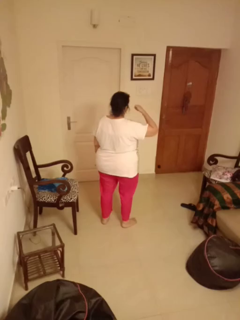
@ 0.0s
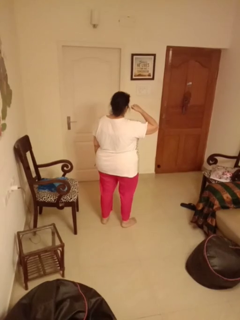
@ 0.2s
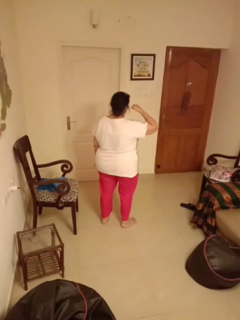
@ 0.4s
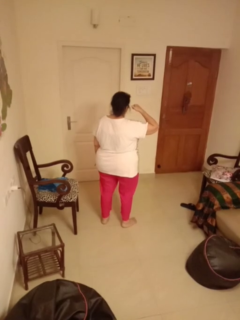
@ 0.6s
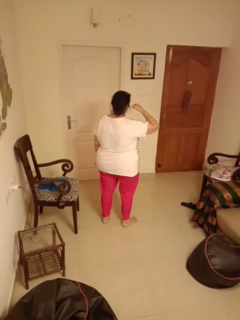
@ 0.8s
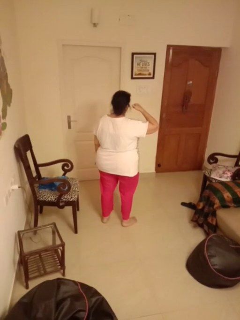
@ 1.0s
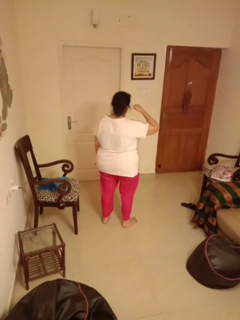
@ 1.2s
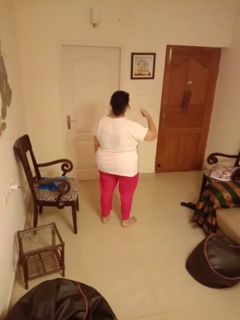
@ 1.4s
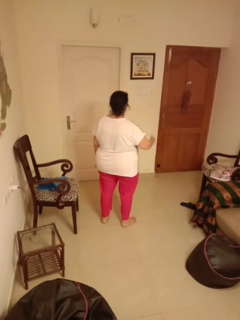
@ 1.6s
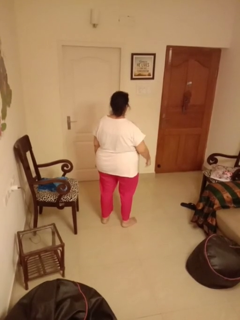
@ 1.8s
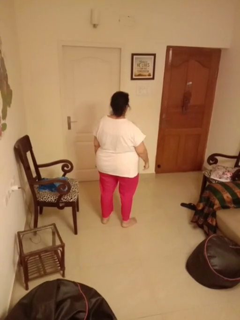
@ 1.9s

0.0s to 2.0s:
person gestures call me

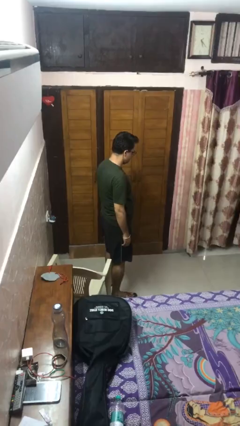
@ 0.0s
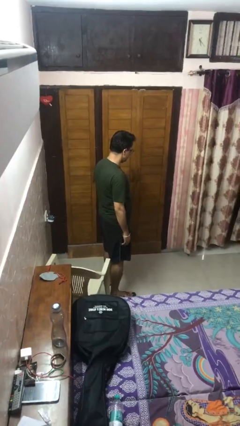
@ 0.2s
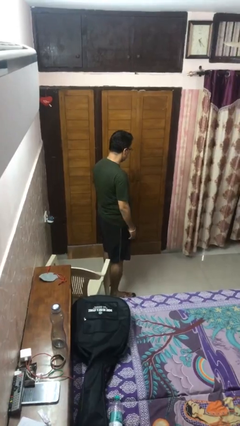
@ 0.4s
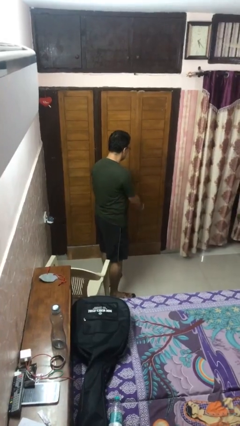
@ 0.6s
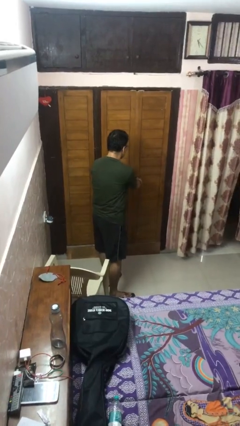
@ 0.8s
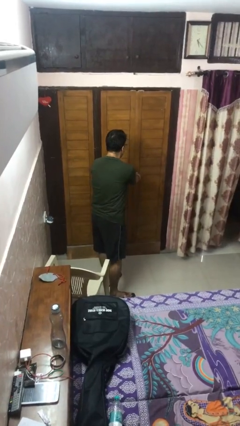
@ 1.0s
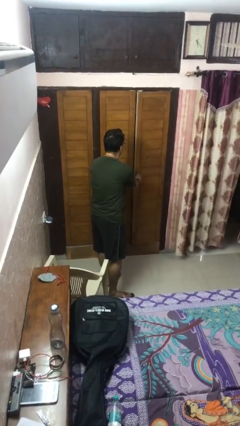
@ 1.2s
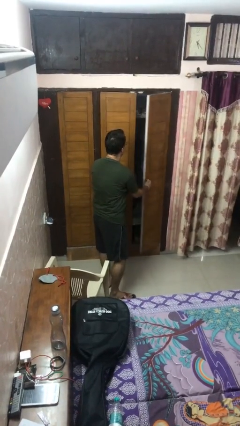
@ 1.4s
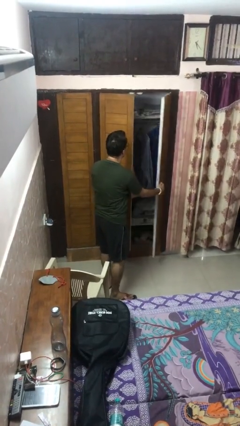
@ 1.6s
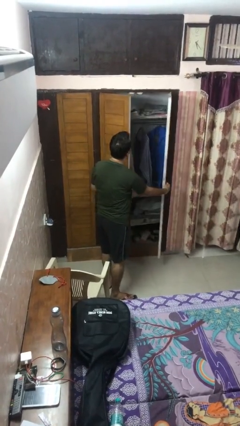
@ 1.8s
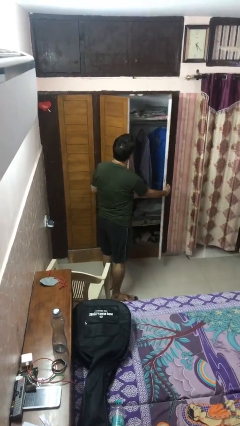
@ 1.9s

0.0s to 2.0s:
person opens closet door

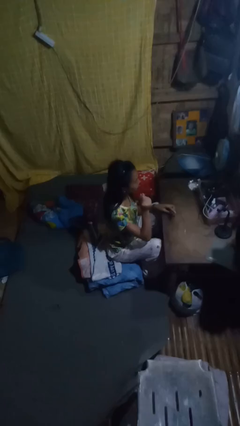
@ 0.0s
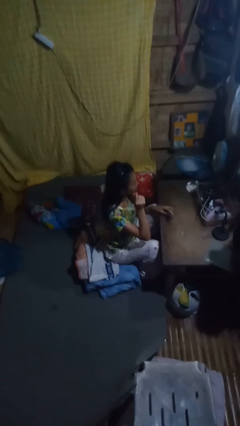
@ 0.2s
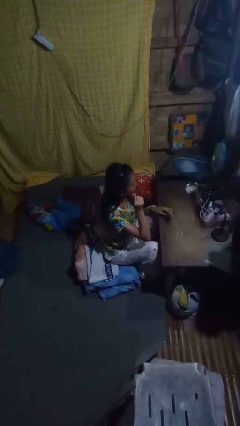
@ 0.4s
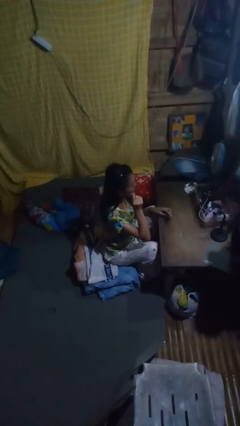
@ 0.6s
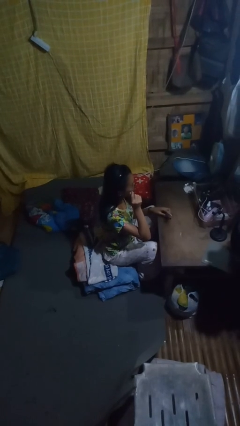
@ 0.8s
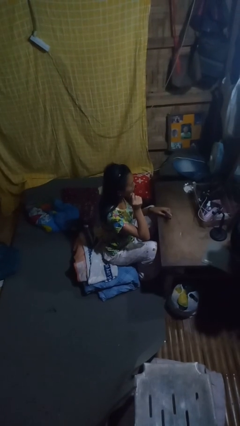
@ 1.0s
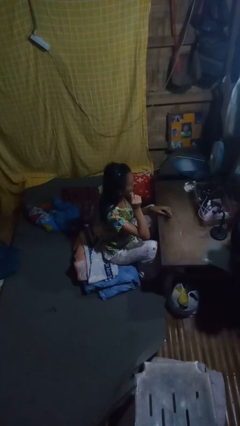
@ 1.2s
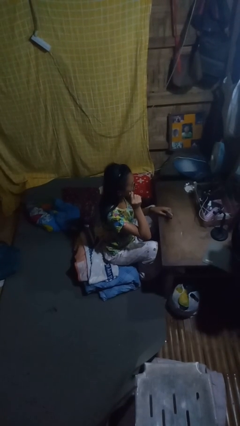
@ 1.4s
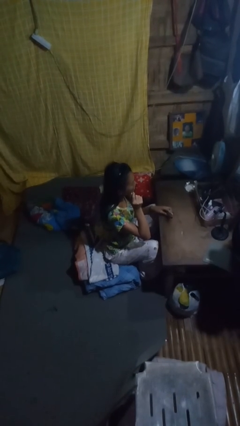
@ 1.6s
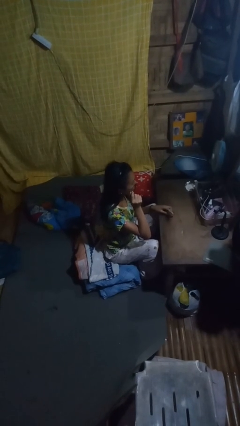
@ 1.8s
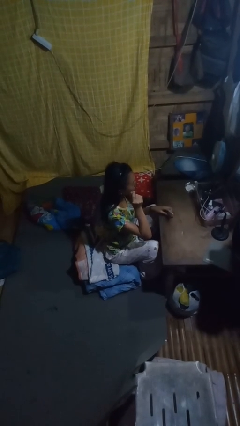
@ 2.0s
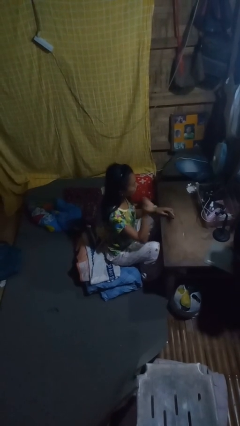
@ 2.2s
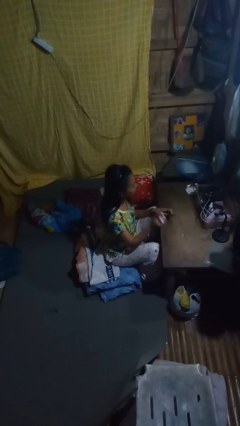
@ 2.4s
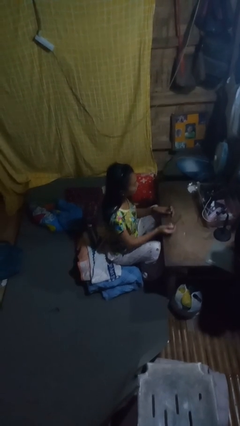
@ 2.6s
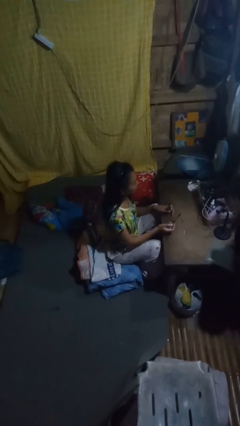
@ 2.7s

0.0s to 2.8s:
person applies eye makeup

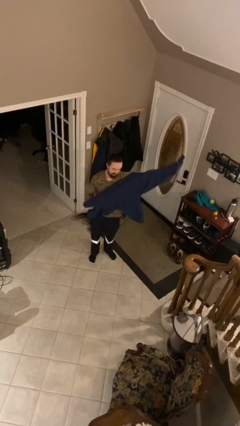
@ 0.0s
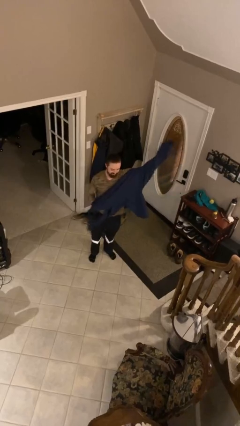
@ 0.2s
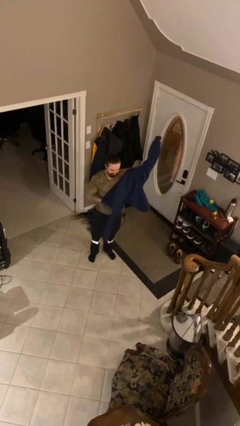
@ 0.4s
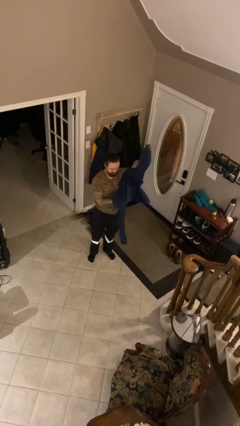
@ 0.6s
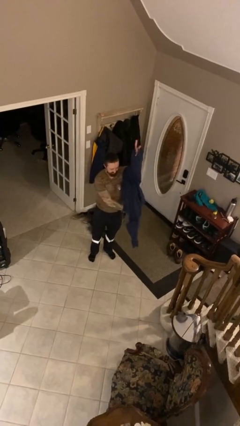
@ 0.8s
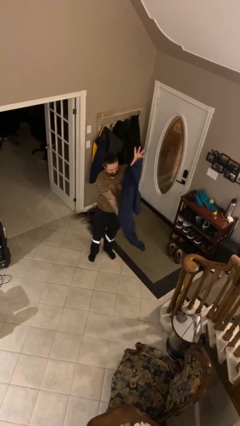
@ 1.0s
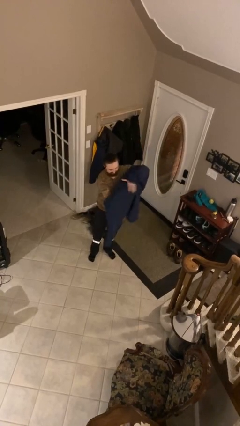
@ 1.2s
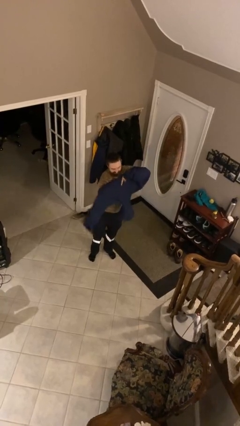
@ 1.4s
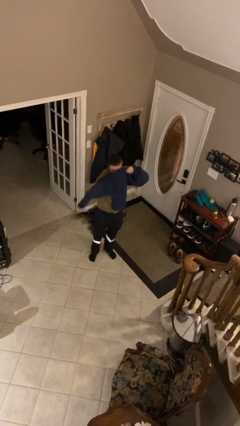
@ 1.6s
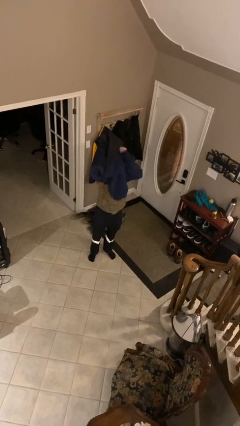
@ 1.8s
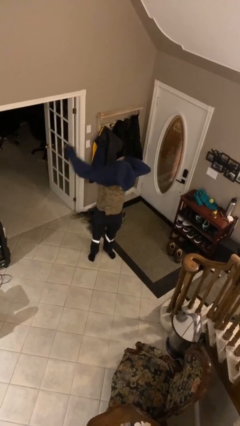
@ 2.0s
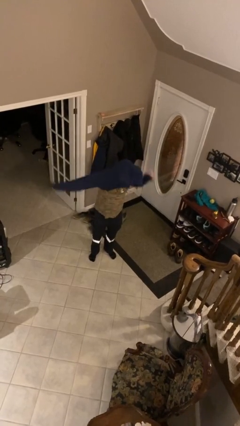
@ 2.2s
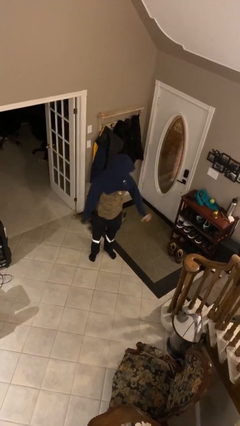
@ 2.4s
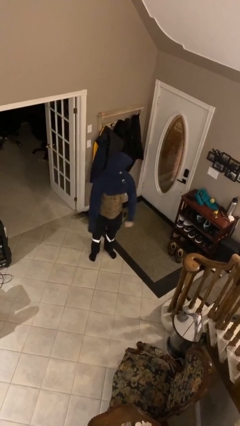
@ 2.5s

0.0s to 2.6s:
person puts on hoodie

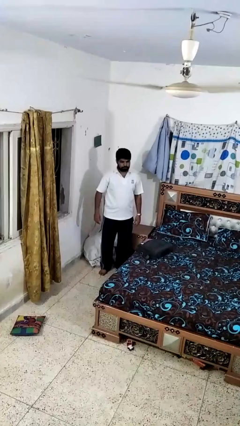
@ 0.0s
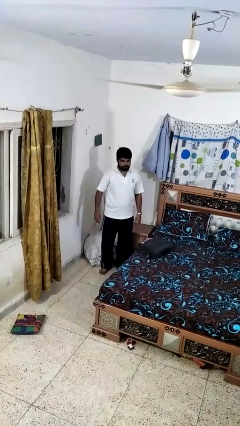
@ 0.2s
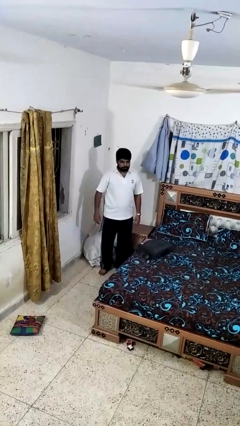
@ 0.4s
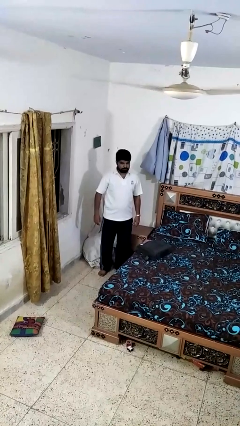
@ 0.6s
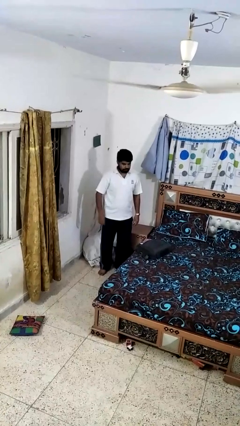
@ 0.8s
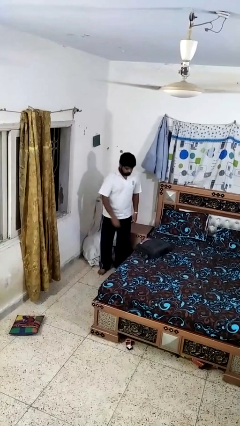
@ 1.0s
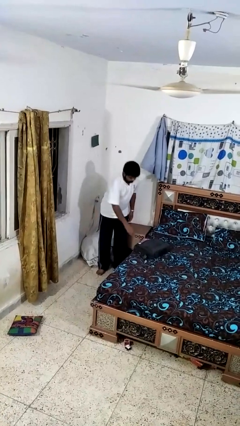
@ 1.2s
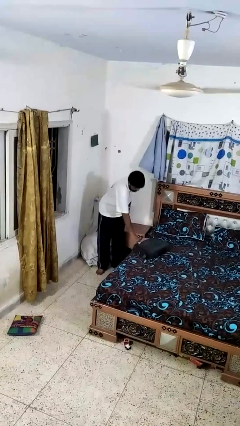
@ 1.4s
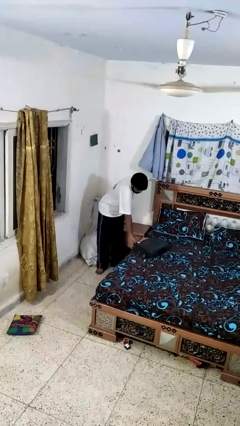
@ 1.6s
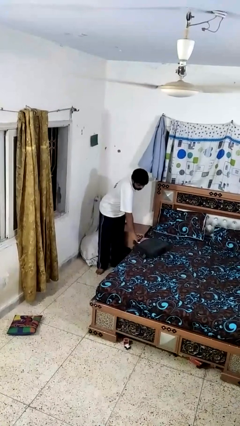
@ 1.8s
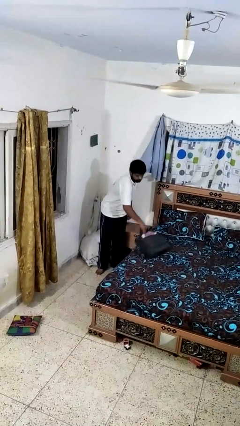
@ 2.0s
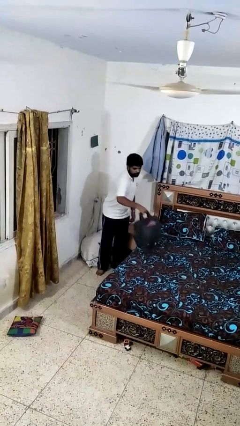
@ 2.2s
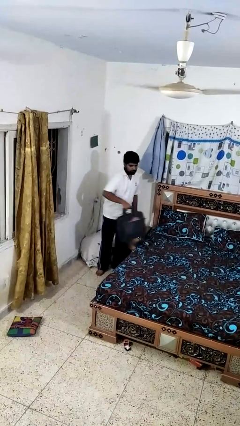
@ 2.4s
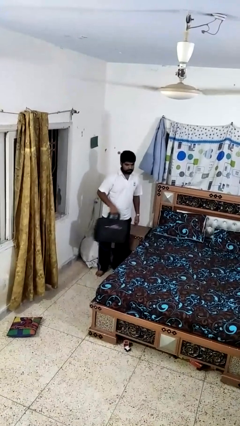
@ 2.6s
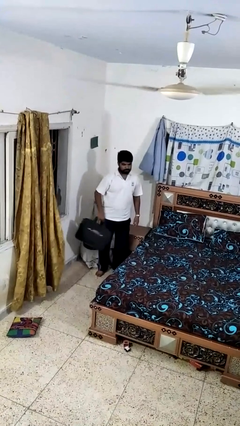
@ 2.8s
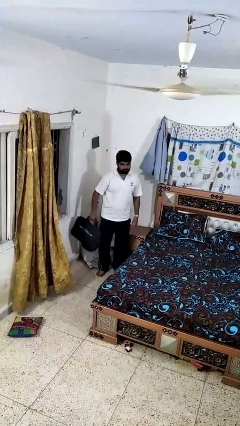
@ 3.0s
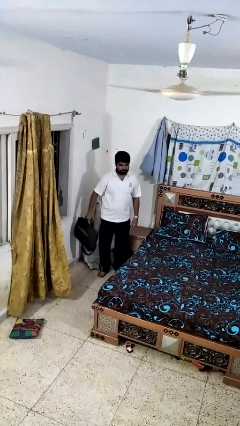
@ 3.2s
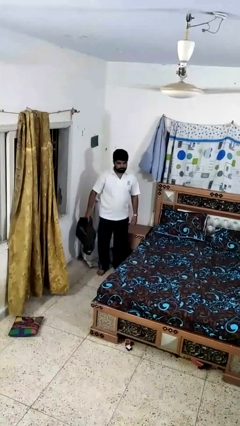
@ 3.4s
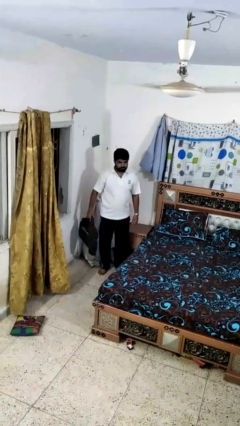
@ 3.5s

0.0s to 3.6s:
person picks up object from bed

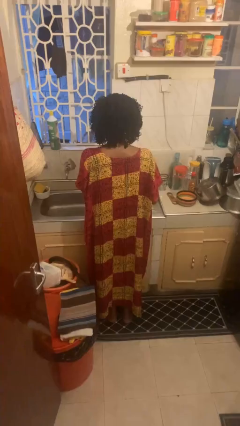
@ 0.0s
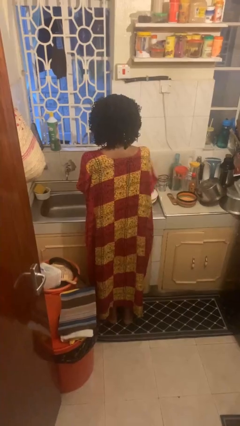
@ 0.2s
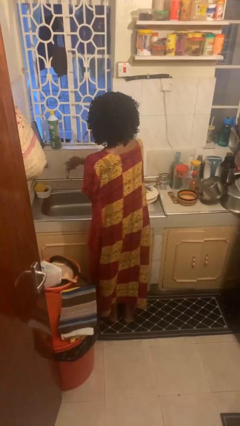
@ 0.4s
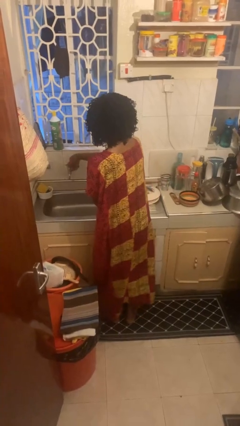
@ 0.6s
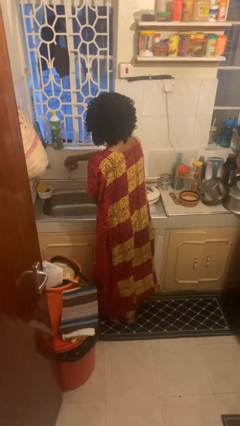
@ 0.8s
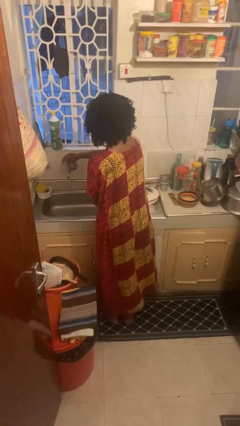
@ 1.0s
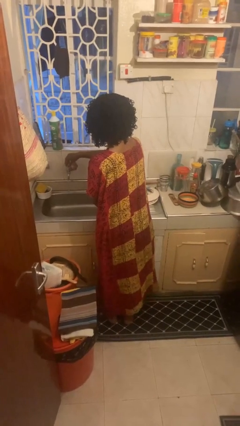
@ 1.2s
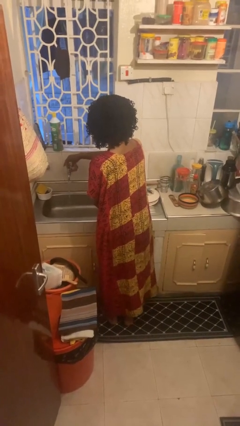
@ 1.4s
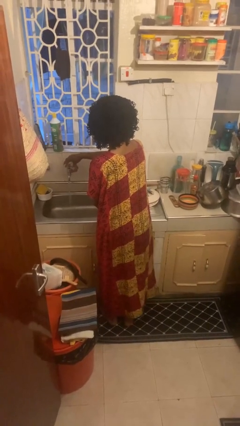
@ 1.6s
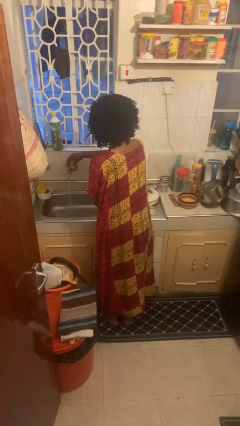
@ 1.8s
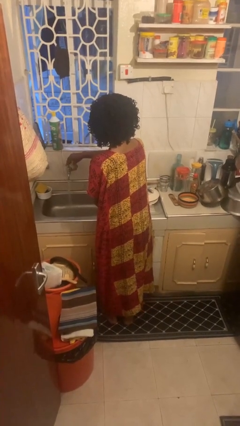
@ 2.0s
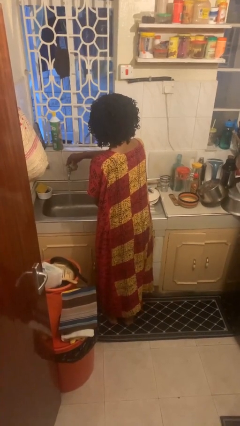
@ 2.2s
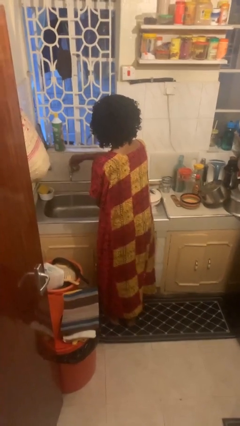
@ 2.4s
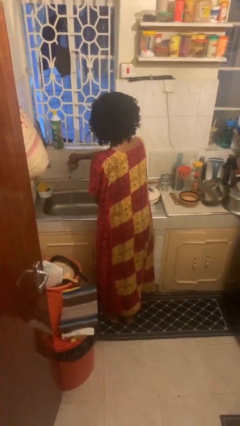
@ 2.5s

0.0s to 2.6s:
person turns on faucet

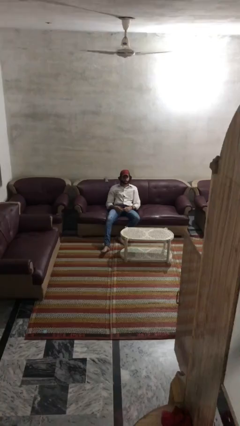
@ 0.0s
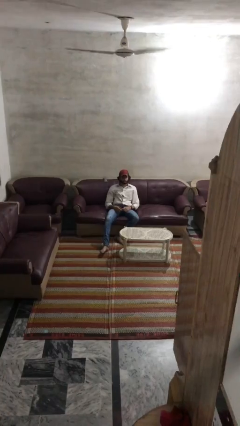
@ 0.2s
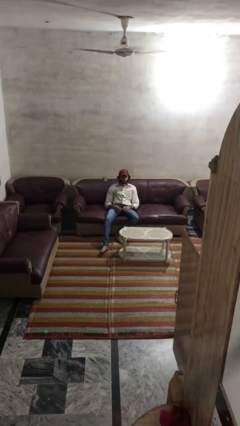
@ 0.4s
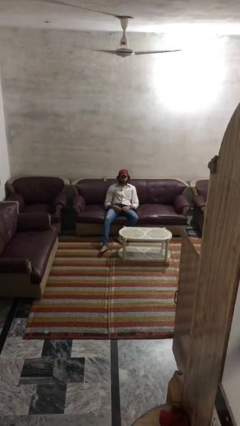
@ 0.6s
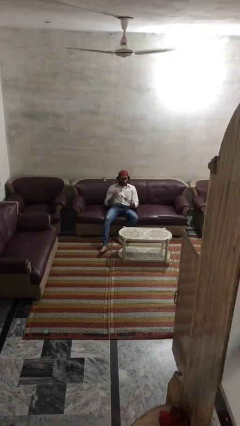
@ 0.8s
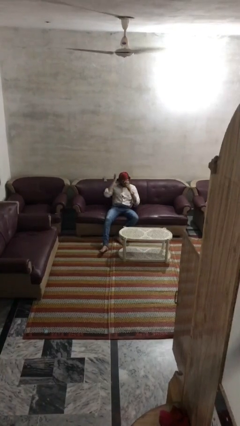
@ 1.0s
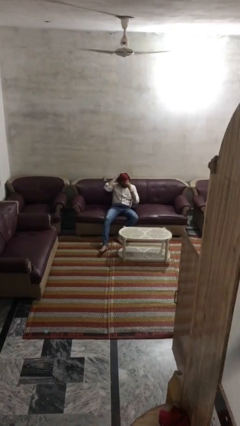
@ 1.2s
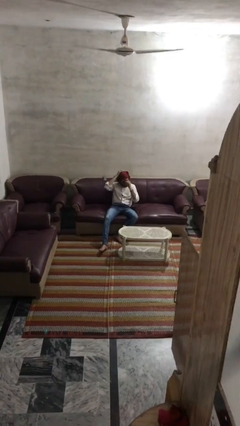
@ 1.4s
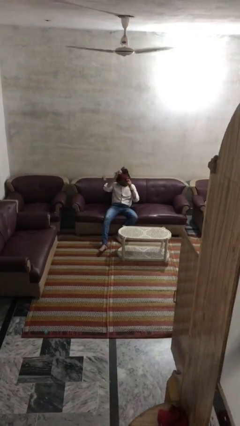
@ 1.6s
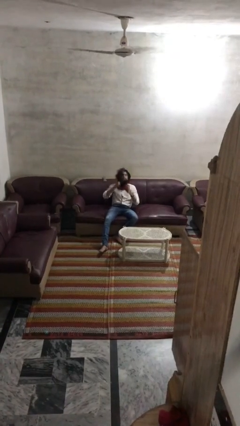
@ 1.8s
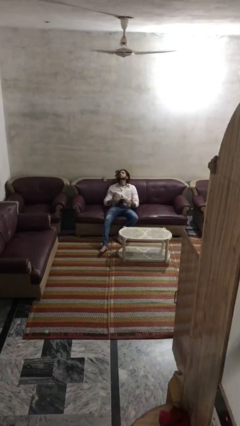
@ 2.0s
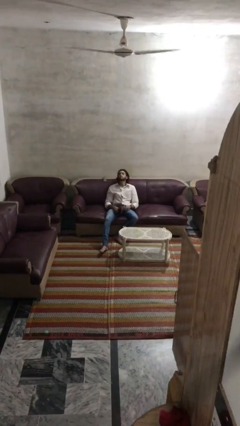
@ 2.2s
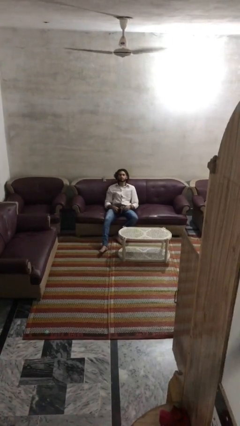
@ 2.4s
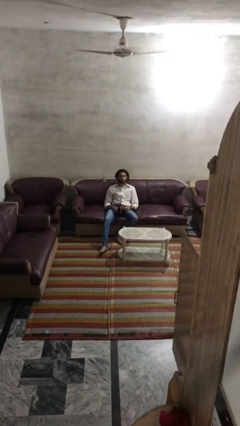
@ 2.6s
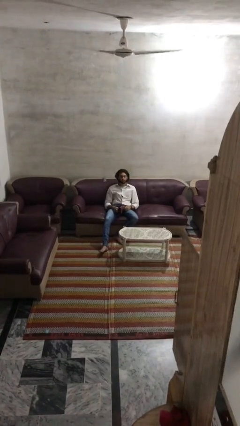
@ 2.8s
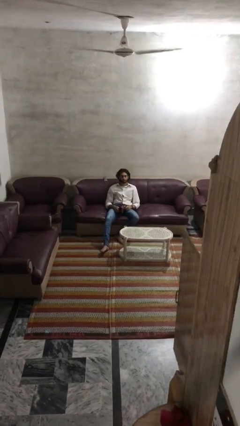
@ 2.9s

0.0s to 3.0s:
person takes off hat
